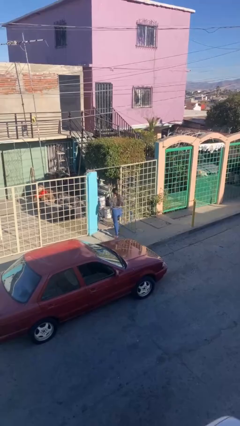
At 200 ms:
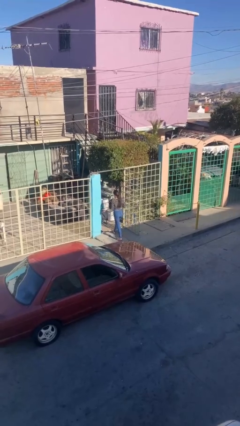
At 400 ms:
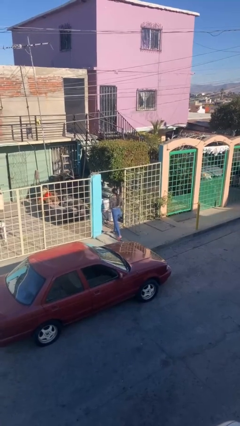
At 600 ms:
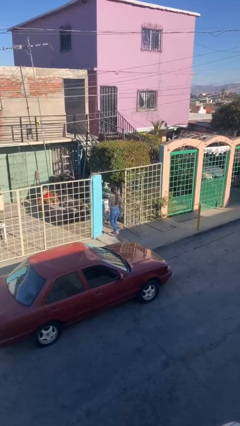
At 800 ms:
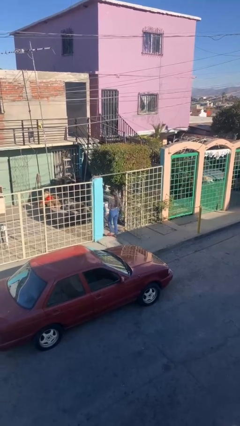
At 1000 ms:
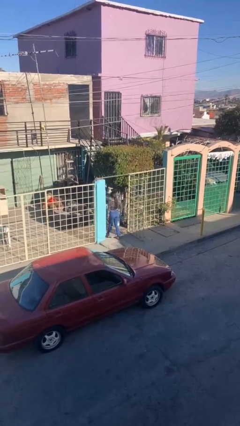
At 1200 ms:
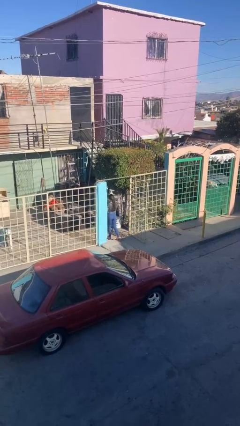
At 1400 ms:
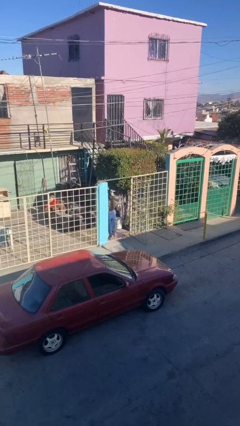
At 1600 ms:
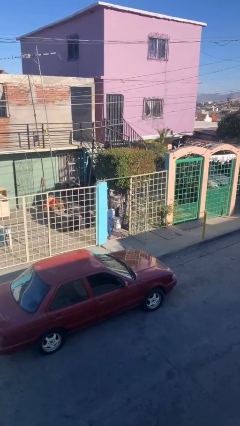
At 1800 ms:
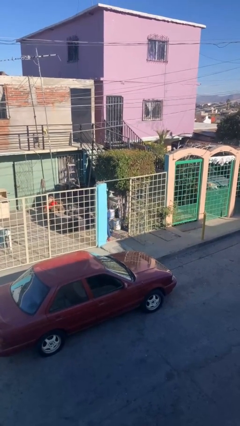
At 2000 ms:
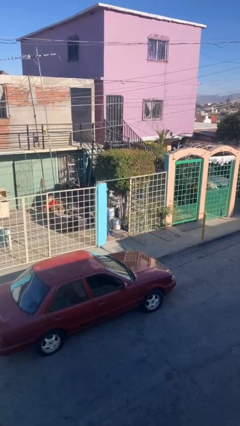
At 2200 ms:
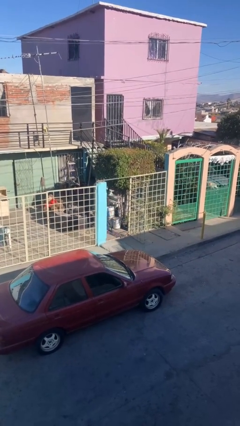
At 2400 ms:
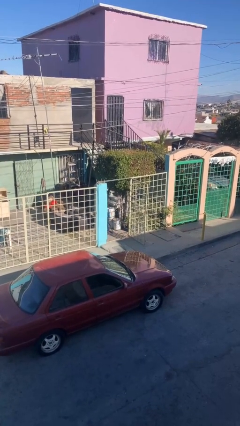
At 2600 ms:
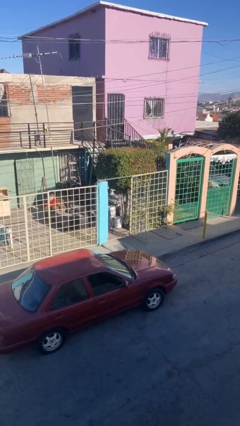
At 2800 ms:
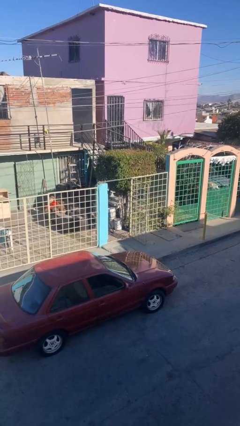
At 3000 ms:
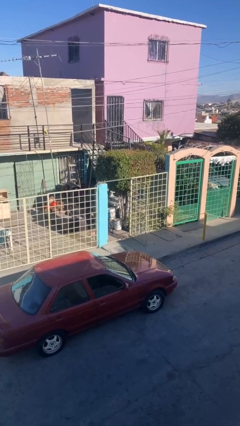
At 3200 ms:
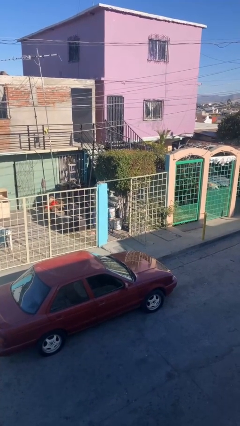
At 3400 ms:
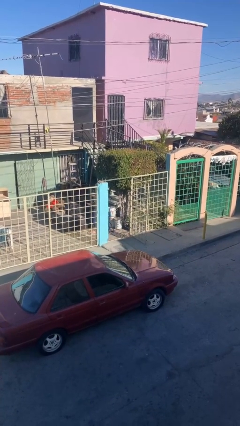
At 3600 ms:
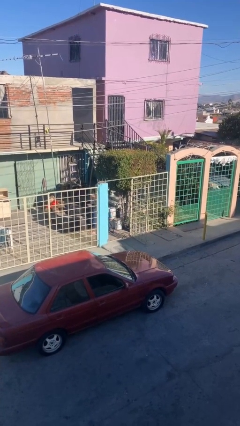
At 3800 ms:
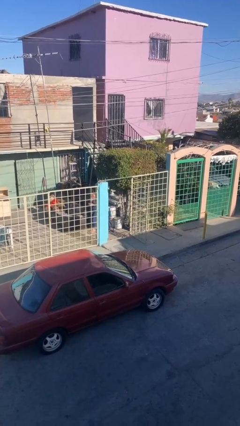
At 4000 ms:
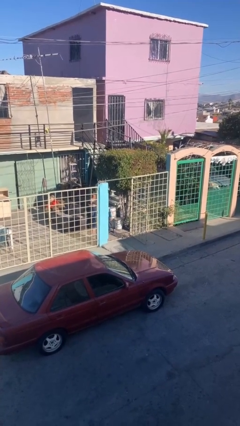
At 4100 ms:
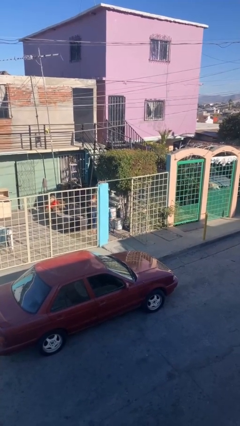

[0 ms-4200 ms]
person enters scene through structure

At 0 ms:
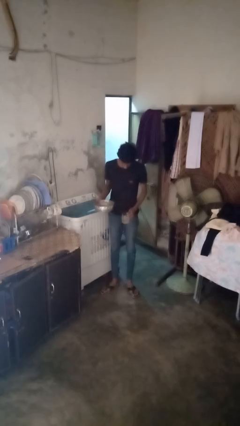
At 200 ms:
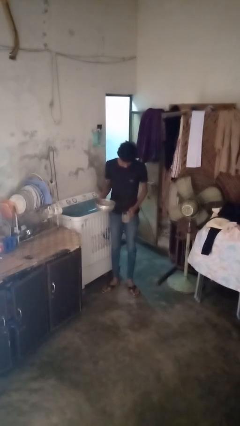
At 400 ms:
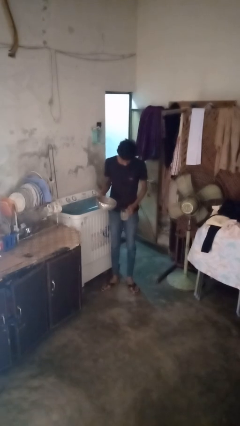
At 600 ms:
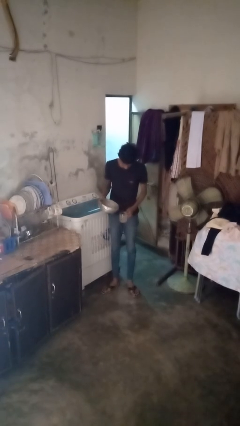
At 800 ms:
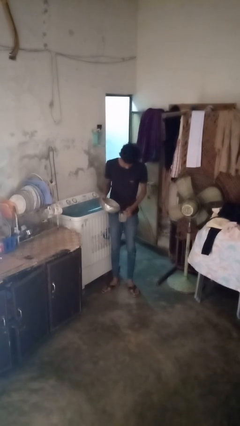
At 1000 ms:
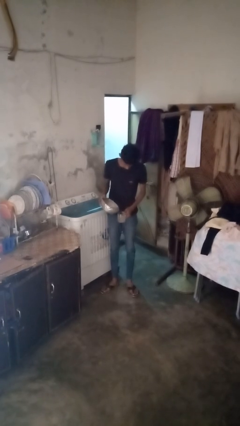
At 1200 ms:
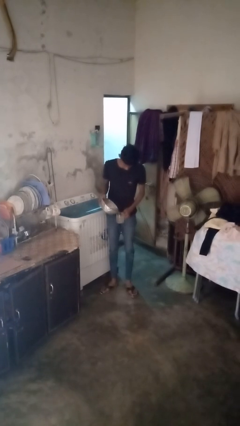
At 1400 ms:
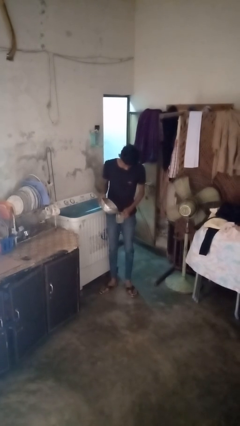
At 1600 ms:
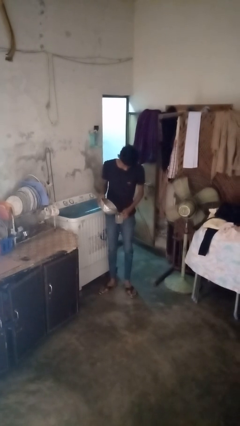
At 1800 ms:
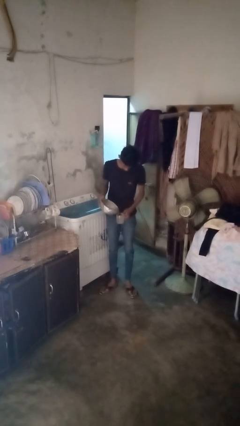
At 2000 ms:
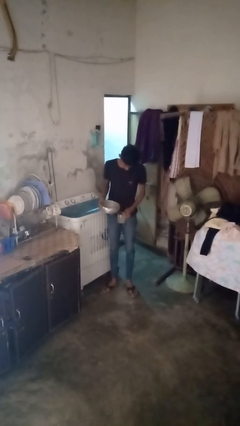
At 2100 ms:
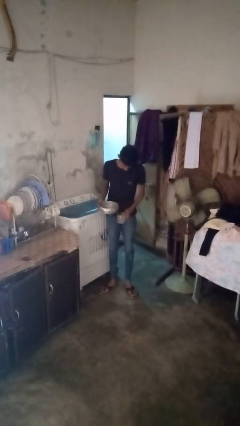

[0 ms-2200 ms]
person pours liquid into cup

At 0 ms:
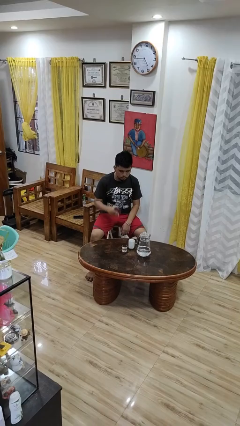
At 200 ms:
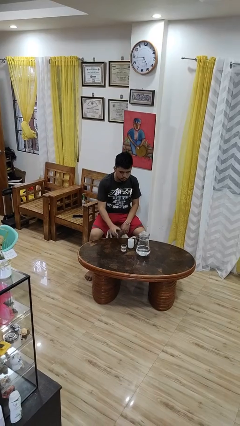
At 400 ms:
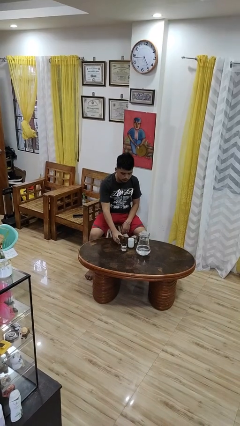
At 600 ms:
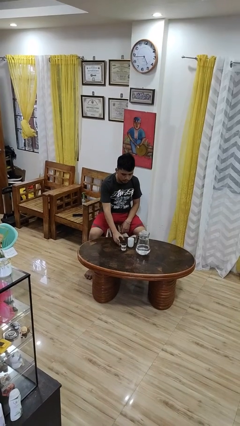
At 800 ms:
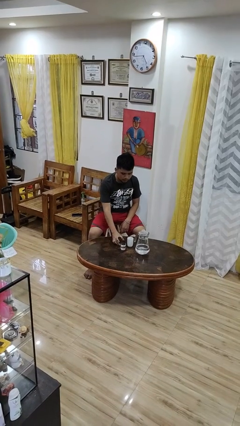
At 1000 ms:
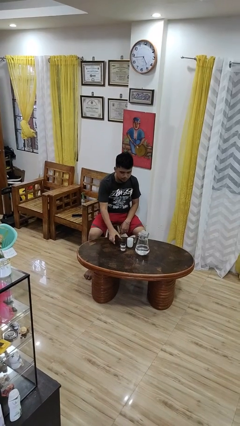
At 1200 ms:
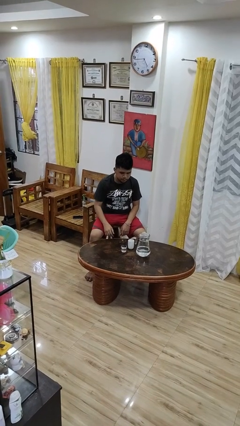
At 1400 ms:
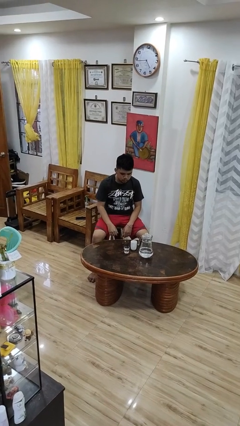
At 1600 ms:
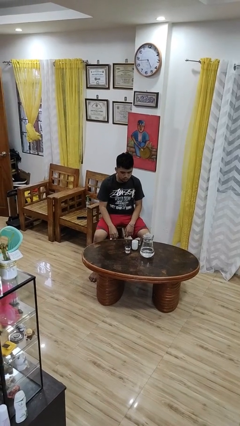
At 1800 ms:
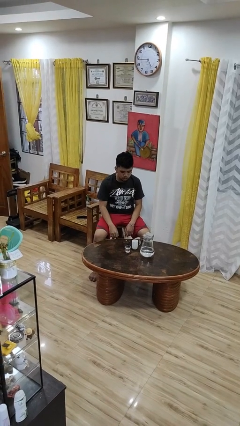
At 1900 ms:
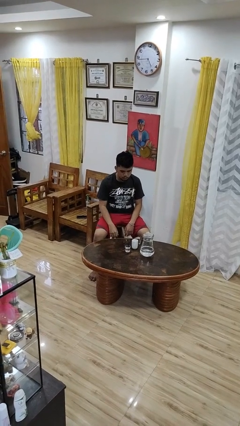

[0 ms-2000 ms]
person puts down object on table

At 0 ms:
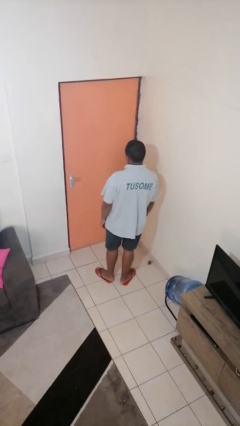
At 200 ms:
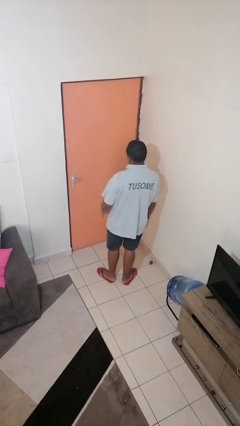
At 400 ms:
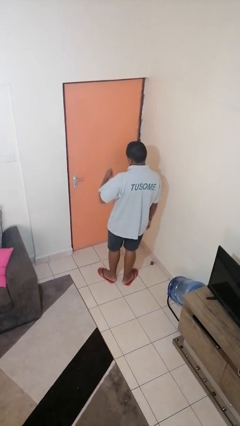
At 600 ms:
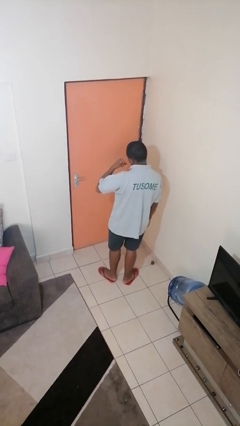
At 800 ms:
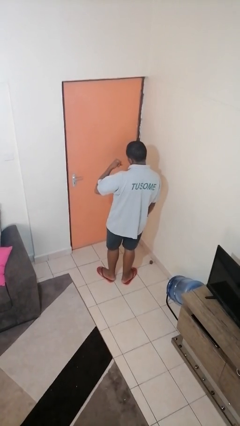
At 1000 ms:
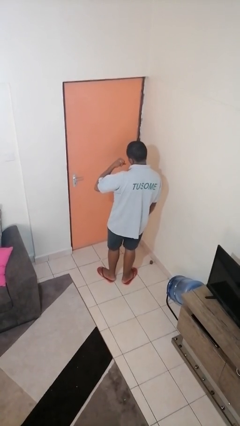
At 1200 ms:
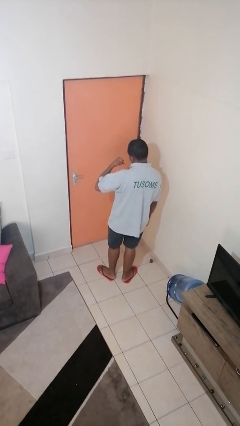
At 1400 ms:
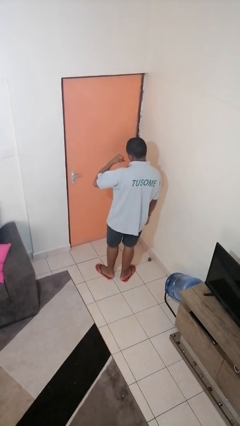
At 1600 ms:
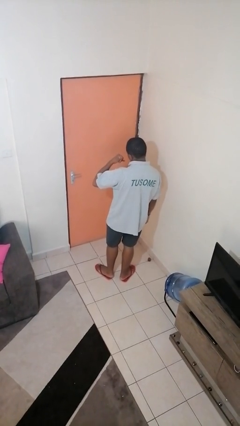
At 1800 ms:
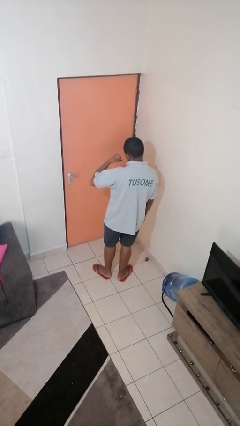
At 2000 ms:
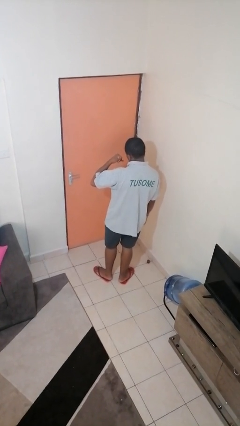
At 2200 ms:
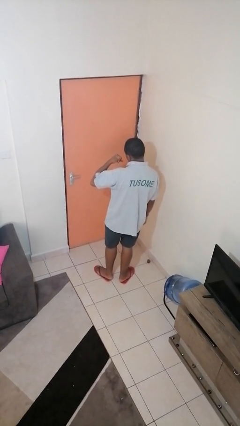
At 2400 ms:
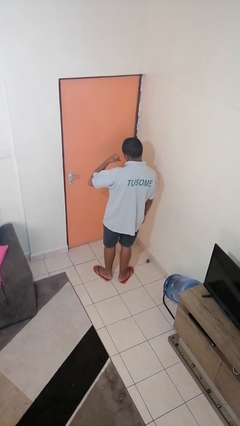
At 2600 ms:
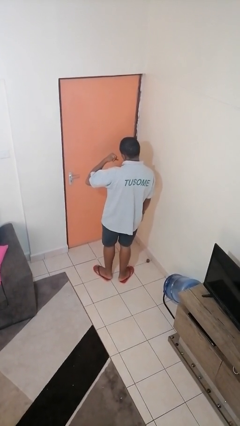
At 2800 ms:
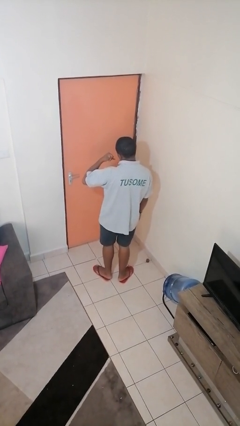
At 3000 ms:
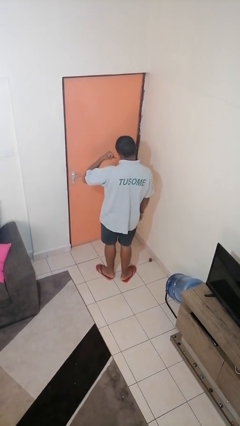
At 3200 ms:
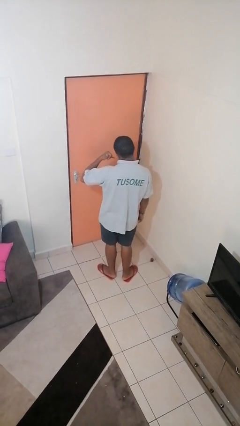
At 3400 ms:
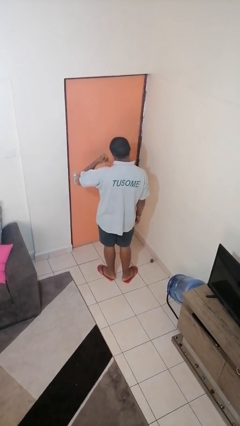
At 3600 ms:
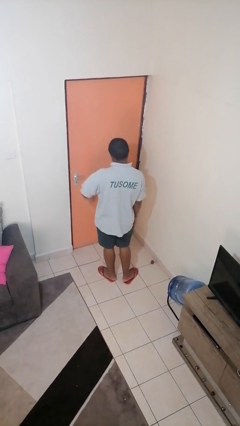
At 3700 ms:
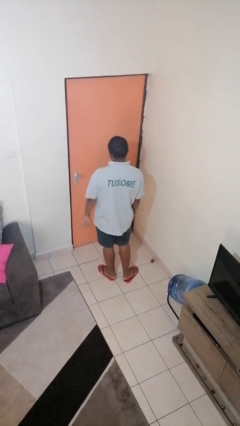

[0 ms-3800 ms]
person gestures call me

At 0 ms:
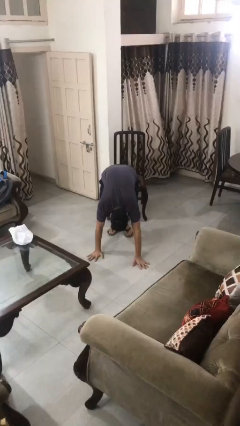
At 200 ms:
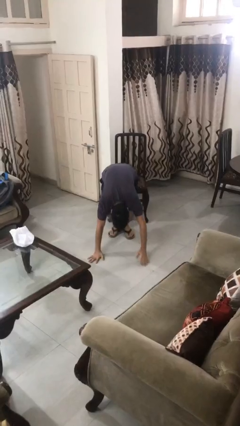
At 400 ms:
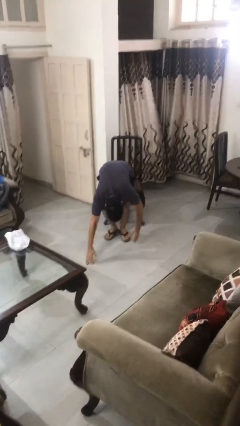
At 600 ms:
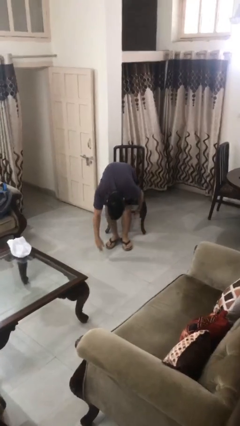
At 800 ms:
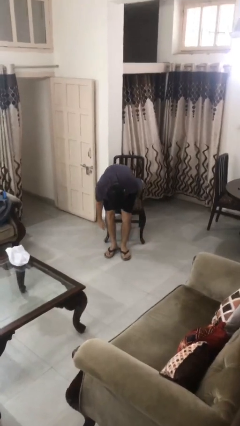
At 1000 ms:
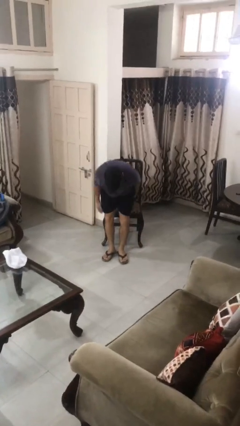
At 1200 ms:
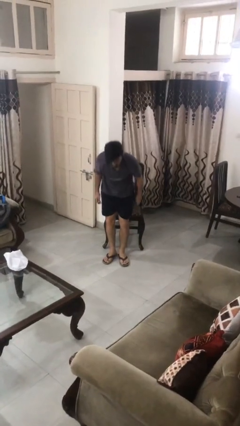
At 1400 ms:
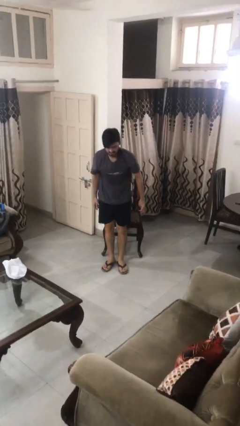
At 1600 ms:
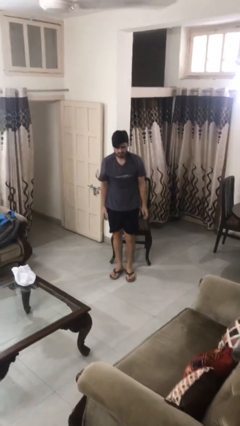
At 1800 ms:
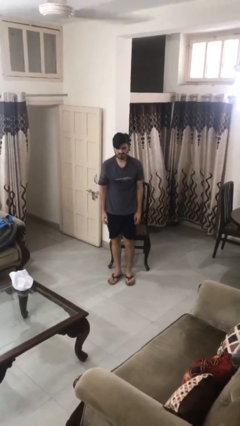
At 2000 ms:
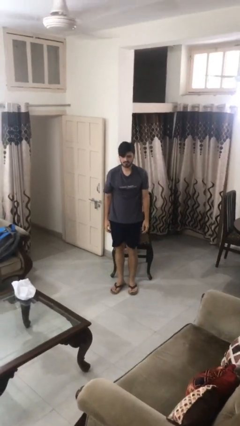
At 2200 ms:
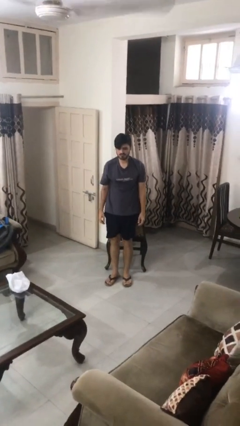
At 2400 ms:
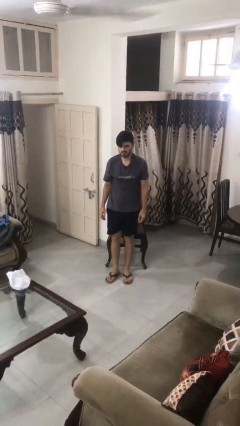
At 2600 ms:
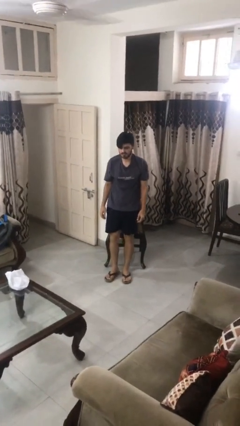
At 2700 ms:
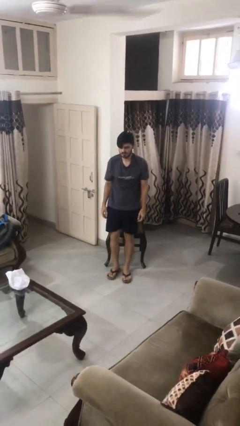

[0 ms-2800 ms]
person stands up from floor

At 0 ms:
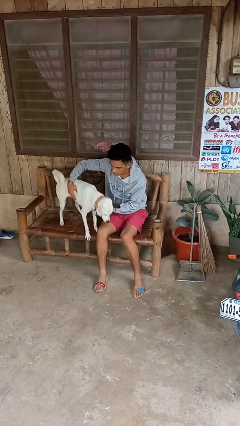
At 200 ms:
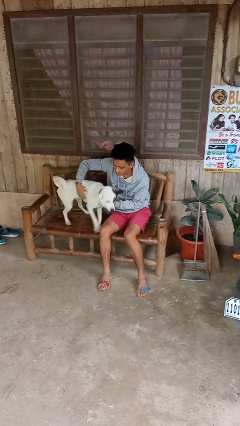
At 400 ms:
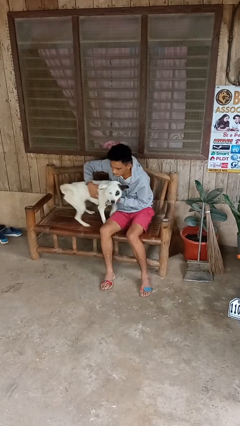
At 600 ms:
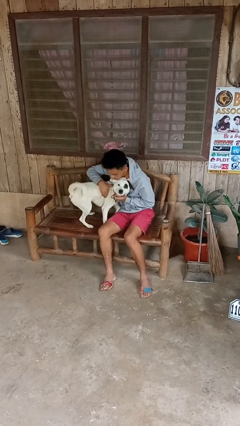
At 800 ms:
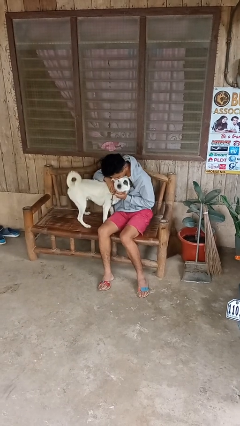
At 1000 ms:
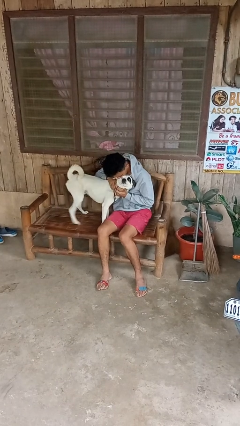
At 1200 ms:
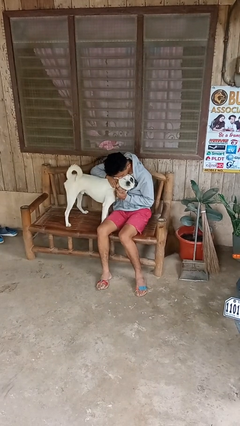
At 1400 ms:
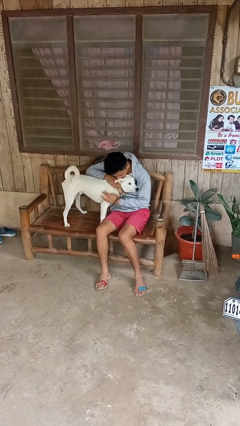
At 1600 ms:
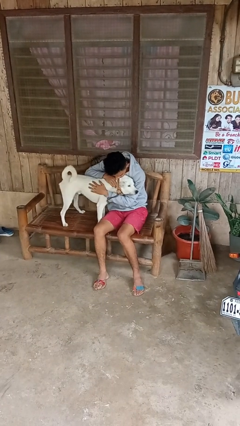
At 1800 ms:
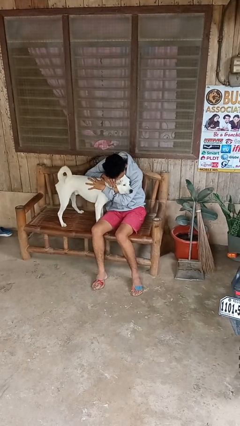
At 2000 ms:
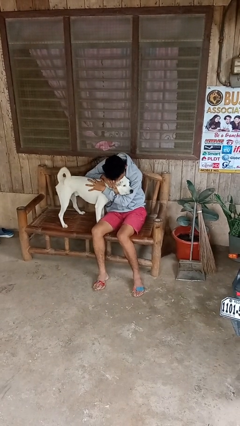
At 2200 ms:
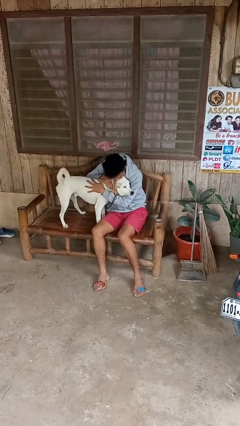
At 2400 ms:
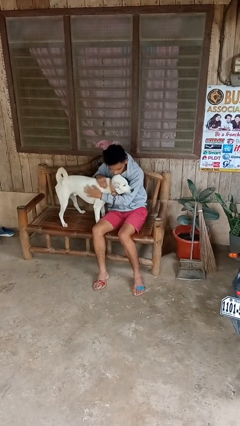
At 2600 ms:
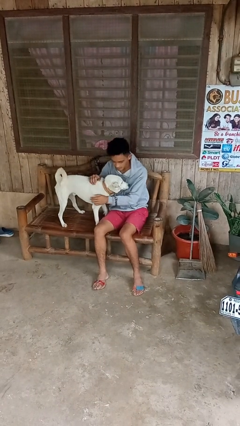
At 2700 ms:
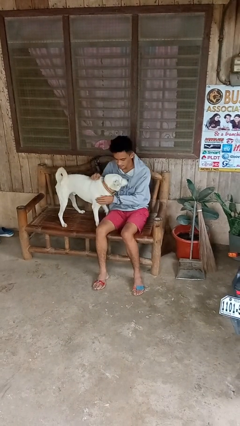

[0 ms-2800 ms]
person hugs dog
